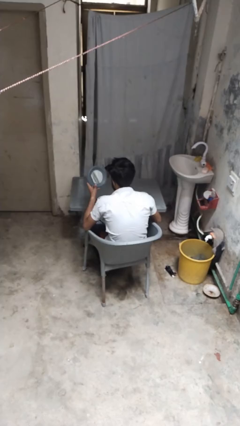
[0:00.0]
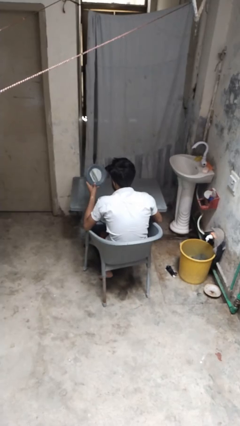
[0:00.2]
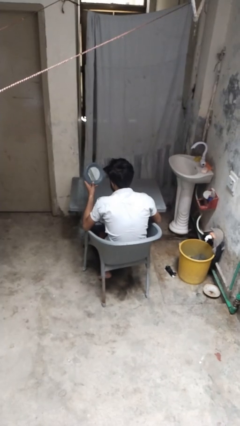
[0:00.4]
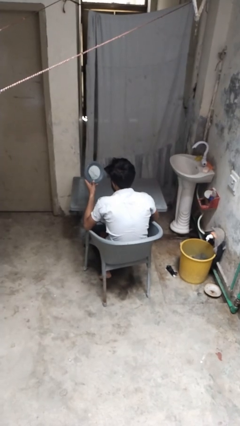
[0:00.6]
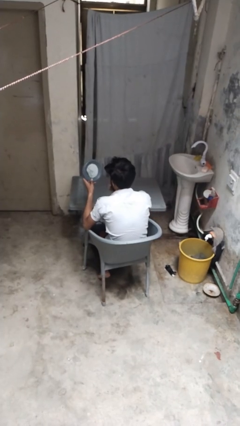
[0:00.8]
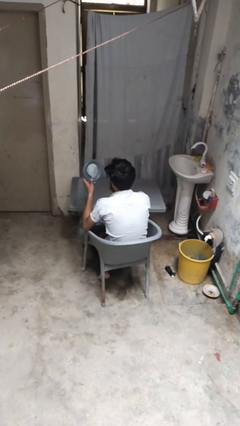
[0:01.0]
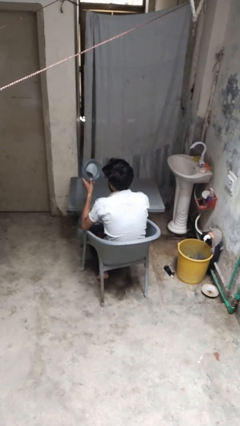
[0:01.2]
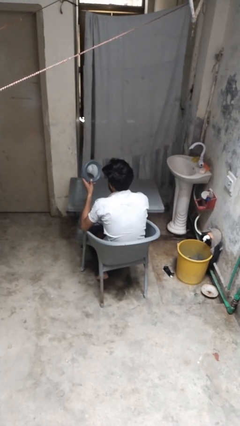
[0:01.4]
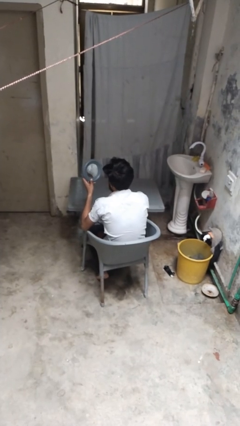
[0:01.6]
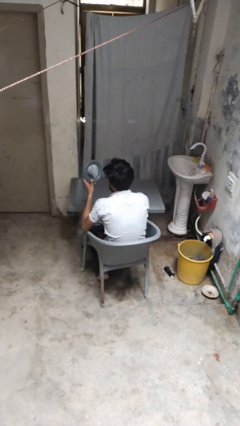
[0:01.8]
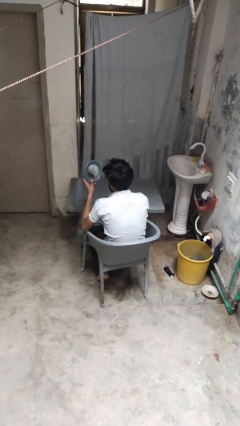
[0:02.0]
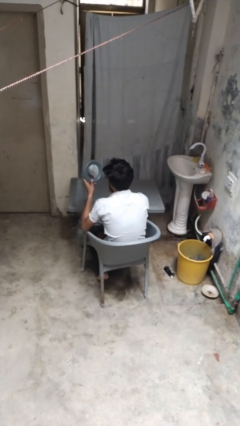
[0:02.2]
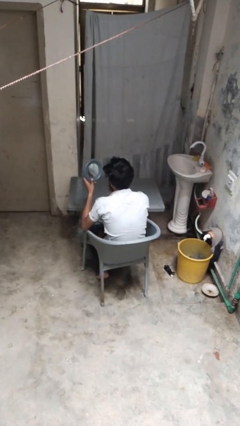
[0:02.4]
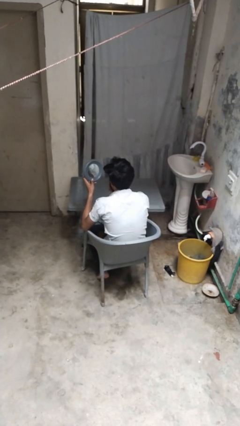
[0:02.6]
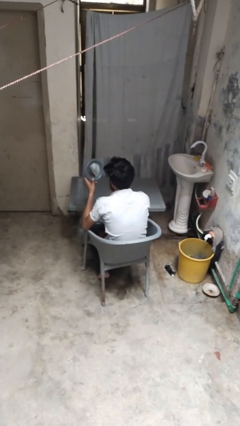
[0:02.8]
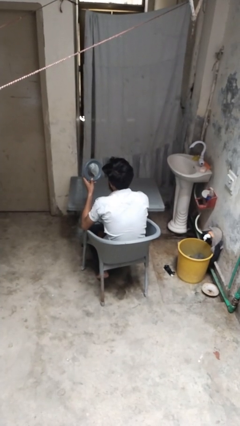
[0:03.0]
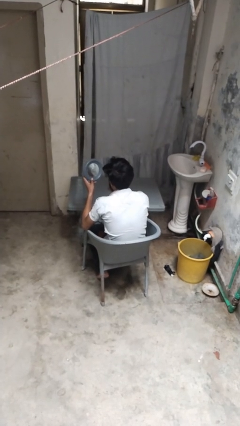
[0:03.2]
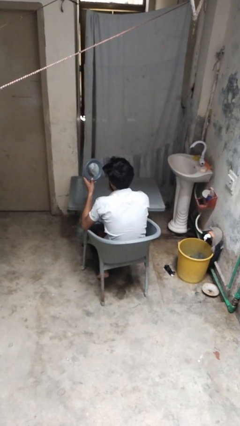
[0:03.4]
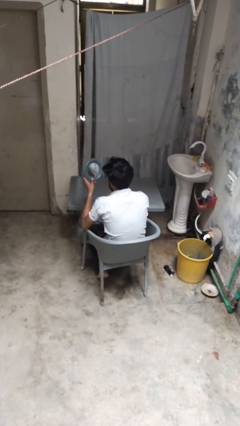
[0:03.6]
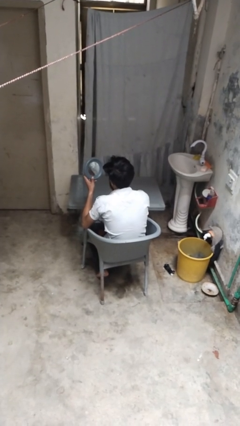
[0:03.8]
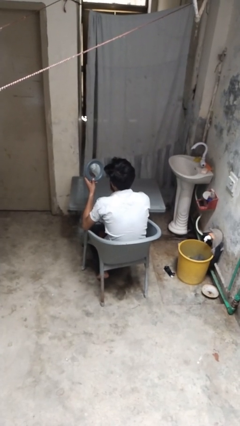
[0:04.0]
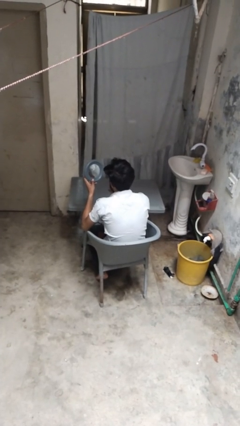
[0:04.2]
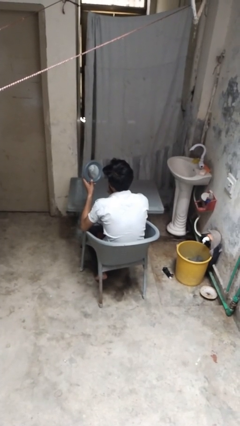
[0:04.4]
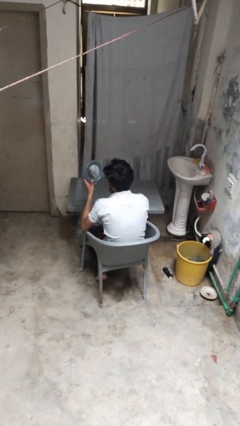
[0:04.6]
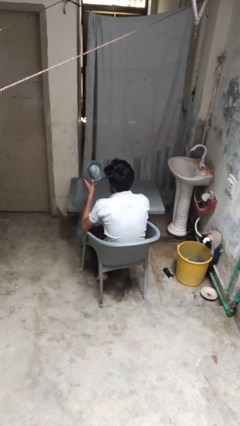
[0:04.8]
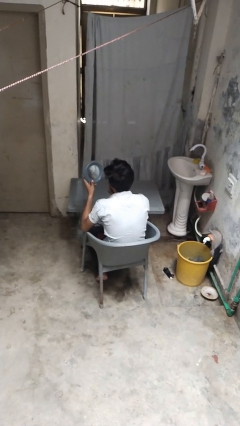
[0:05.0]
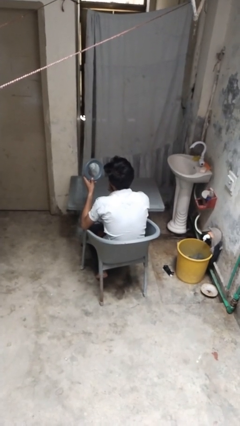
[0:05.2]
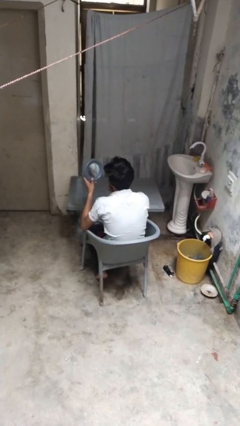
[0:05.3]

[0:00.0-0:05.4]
person applies lip makeup

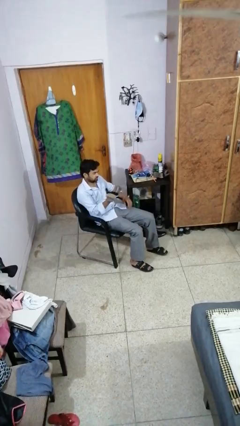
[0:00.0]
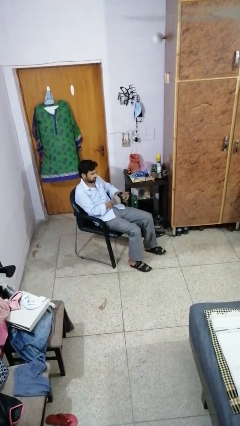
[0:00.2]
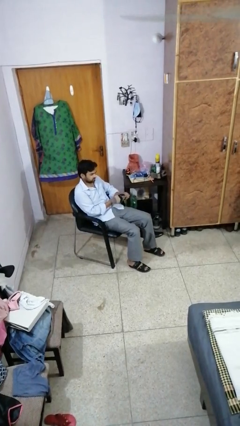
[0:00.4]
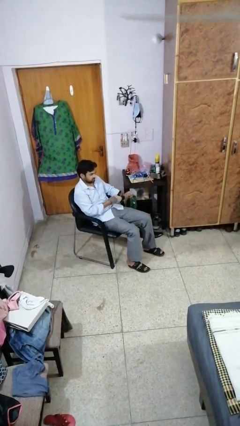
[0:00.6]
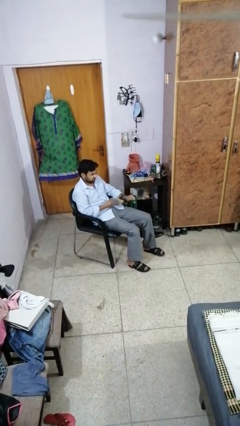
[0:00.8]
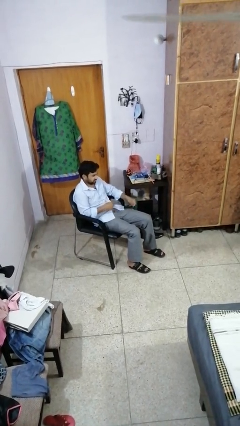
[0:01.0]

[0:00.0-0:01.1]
person takes off gloves

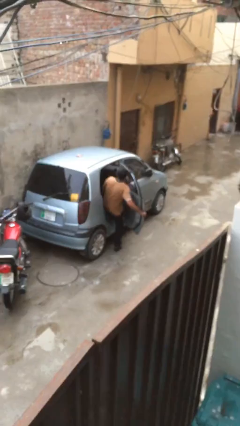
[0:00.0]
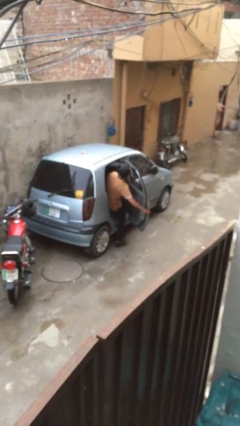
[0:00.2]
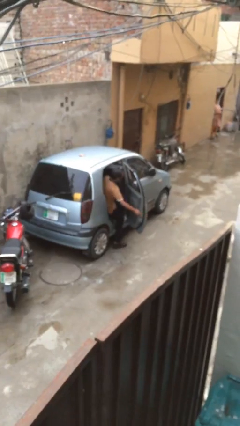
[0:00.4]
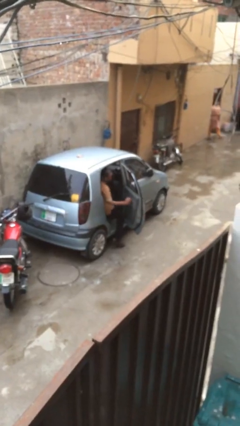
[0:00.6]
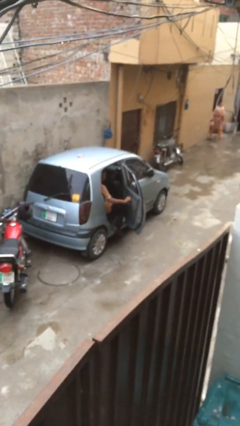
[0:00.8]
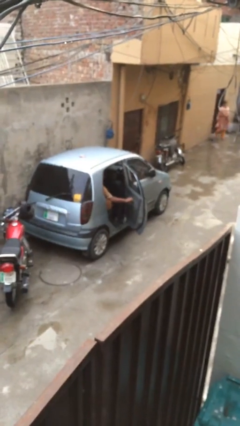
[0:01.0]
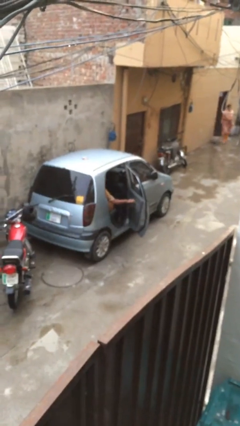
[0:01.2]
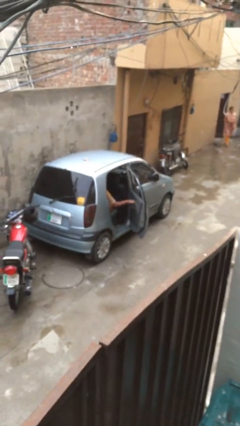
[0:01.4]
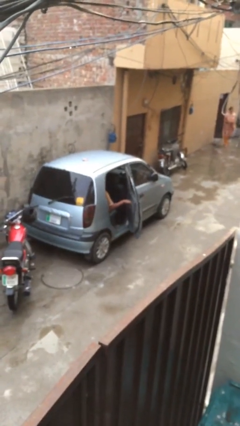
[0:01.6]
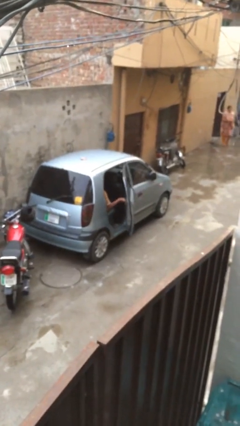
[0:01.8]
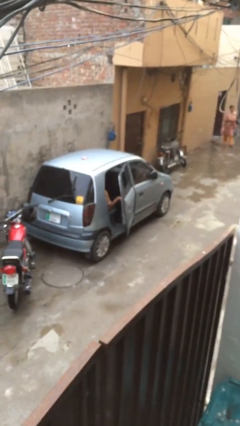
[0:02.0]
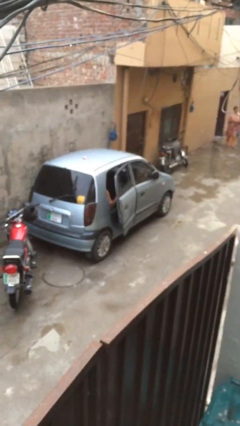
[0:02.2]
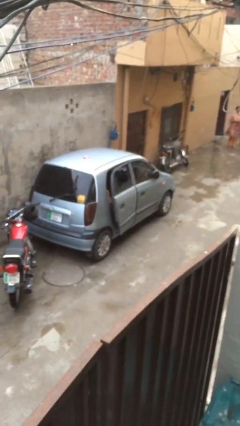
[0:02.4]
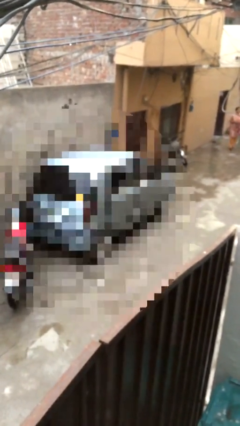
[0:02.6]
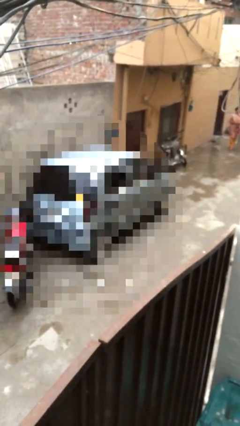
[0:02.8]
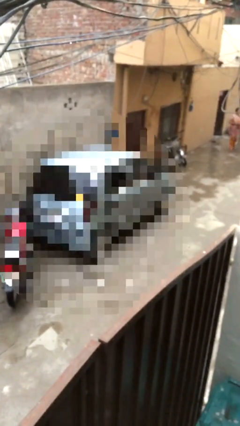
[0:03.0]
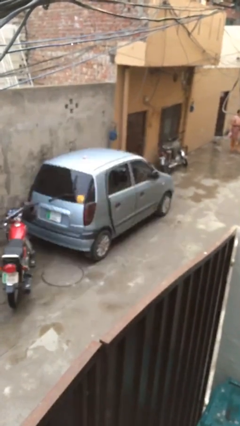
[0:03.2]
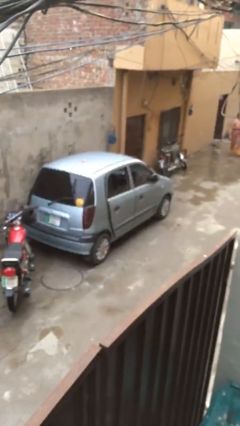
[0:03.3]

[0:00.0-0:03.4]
person closes car door

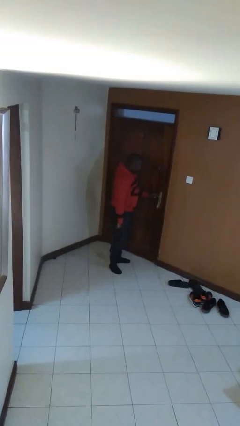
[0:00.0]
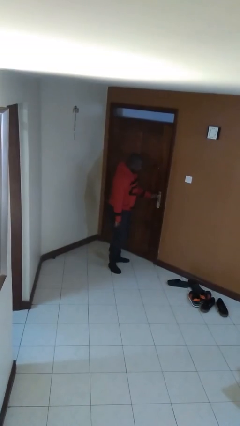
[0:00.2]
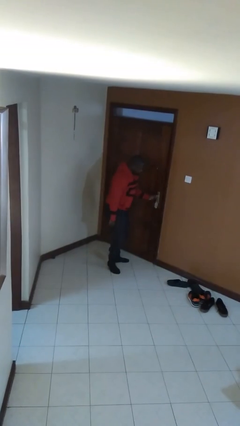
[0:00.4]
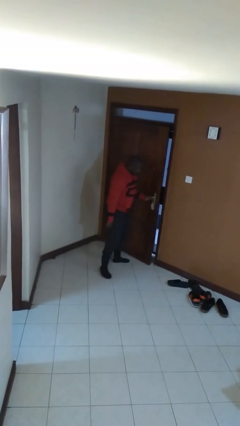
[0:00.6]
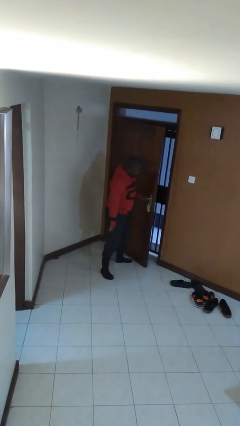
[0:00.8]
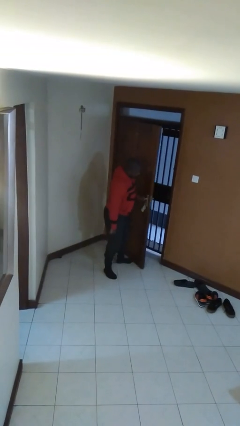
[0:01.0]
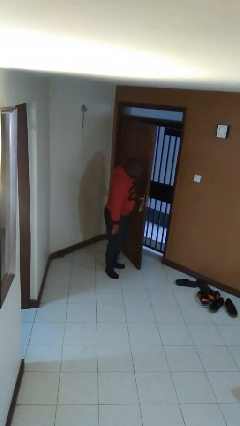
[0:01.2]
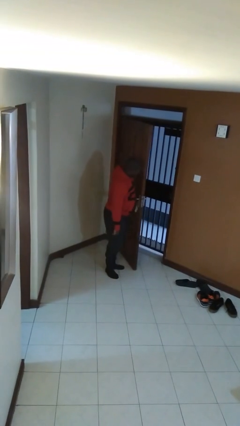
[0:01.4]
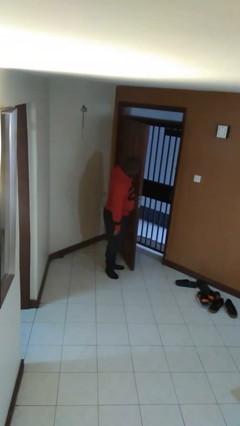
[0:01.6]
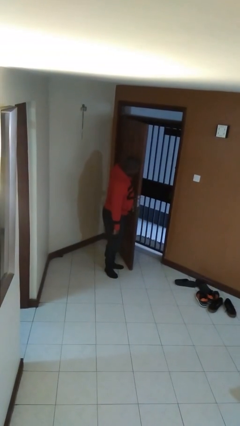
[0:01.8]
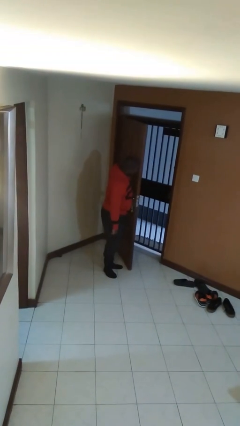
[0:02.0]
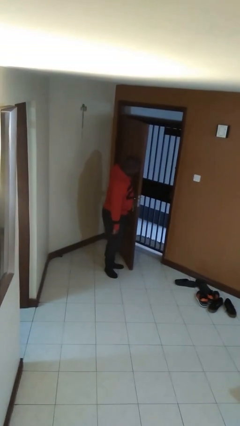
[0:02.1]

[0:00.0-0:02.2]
person opens facility door

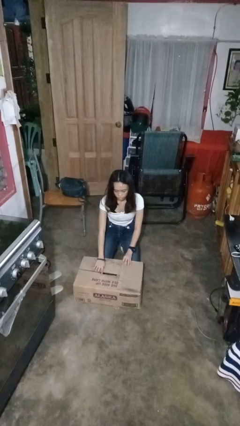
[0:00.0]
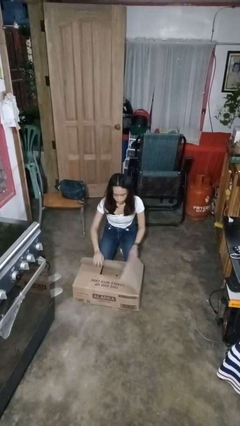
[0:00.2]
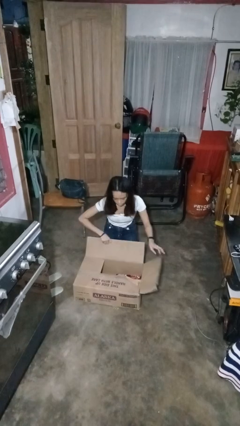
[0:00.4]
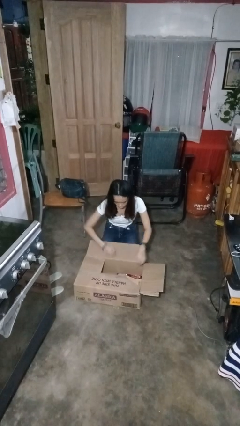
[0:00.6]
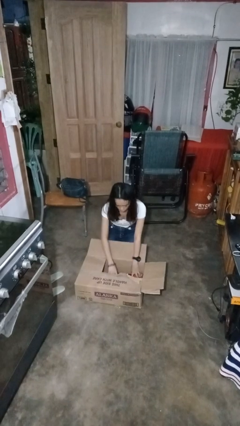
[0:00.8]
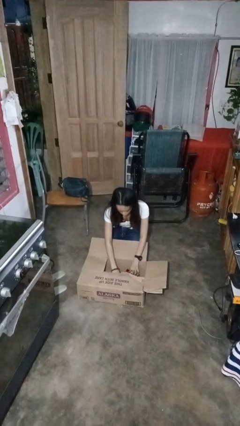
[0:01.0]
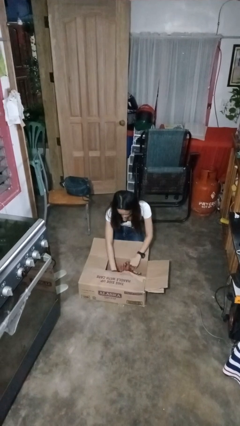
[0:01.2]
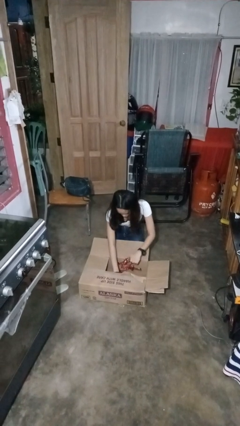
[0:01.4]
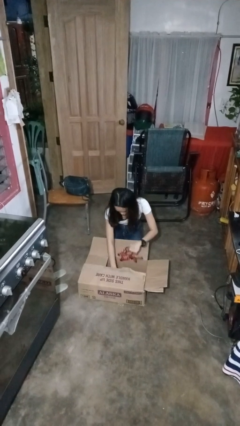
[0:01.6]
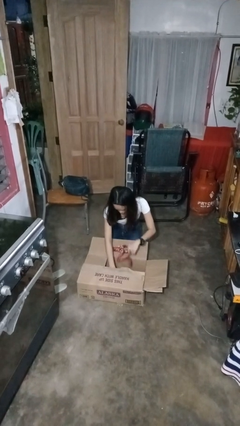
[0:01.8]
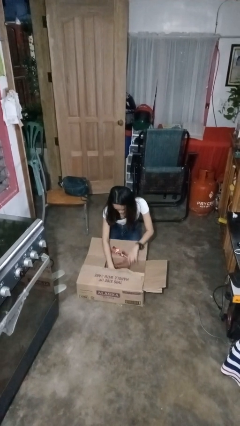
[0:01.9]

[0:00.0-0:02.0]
person searches in box

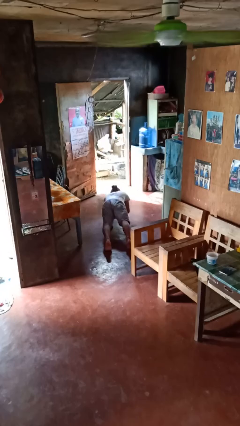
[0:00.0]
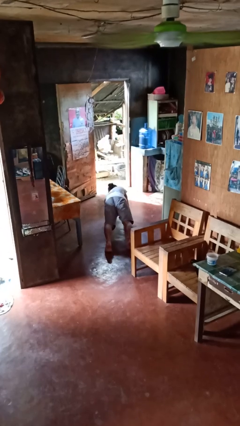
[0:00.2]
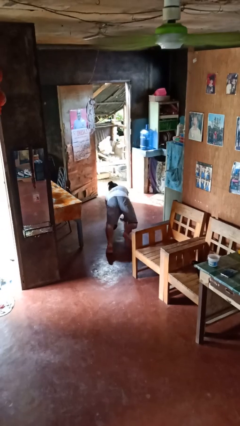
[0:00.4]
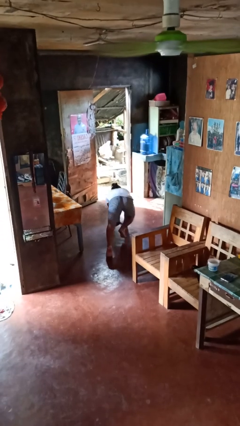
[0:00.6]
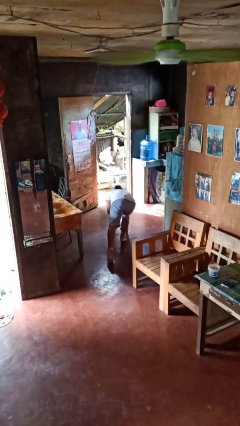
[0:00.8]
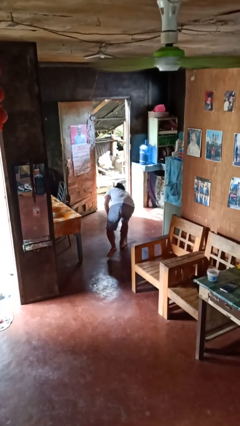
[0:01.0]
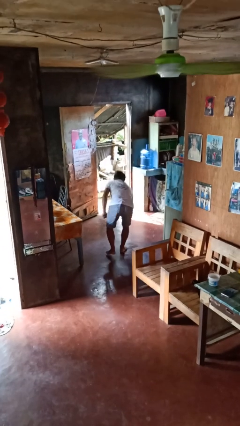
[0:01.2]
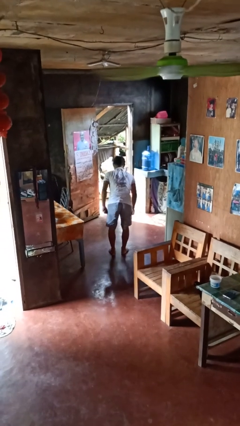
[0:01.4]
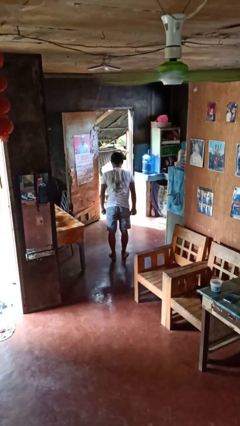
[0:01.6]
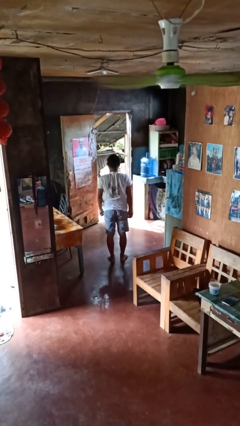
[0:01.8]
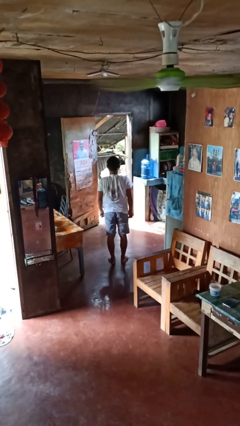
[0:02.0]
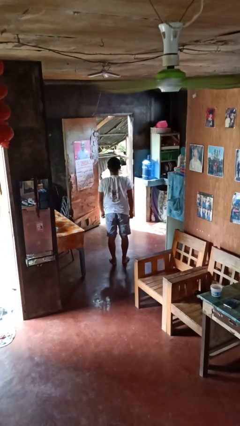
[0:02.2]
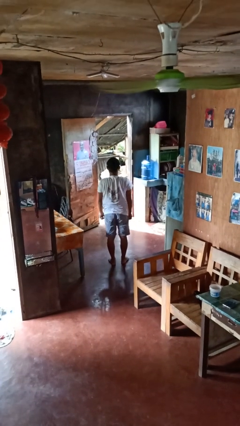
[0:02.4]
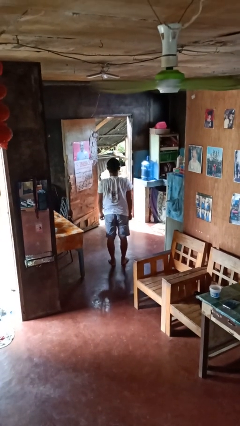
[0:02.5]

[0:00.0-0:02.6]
person stands up from floor

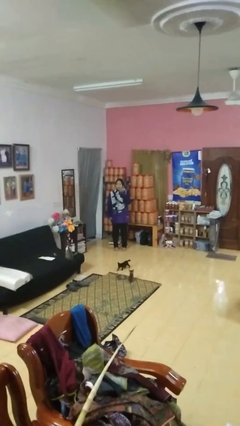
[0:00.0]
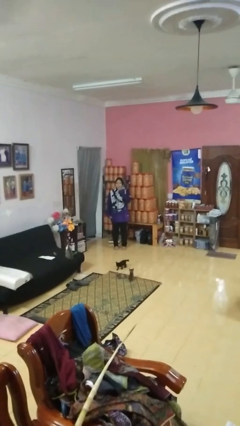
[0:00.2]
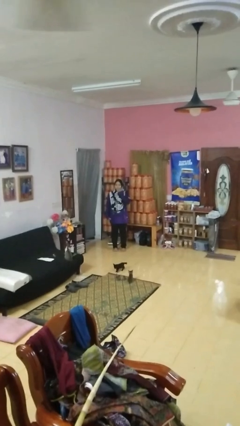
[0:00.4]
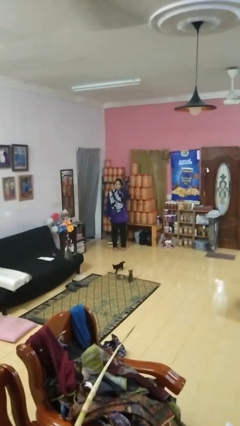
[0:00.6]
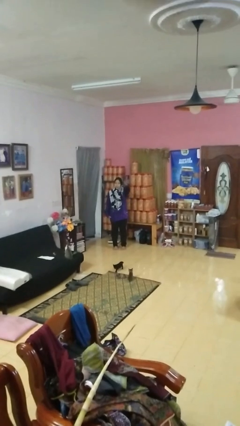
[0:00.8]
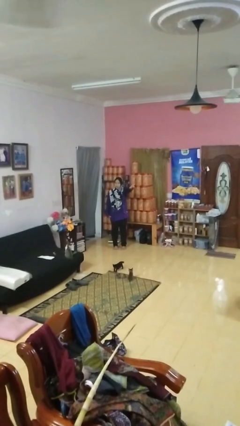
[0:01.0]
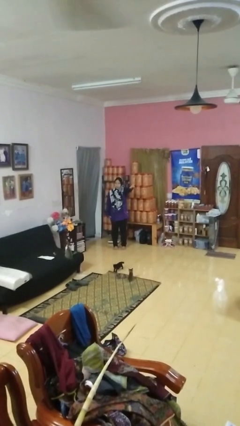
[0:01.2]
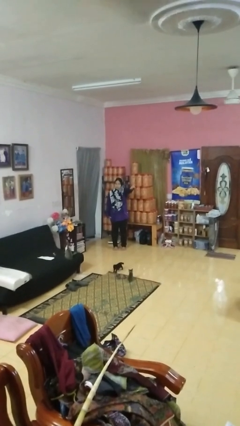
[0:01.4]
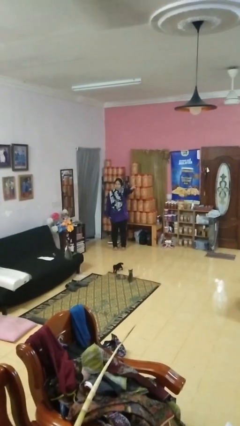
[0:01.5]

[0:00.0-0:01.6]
person gestures blow kiss
